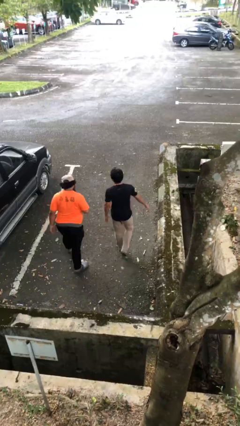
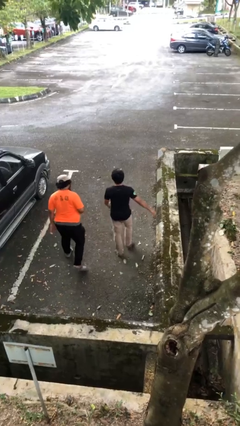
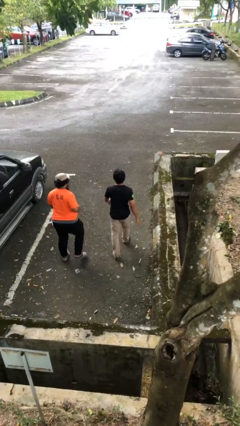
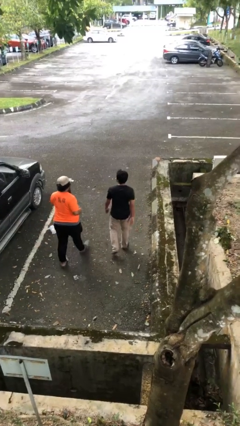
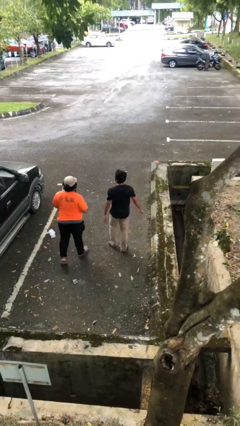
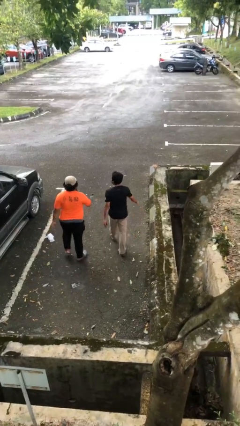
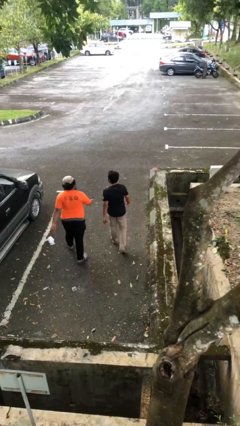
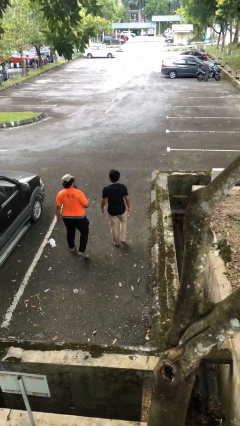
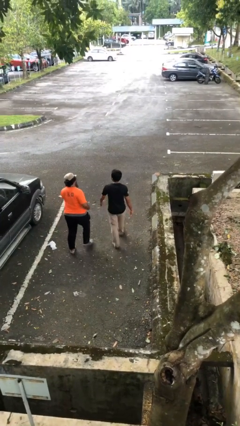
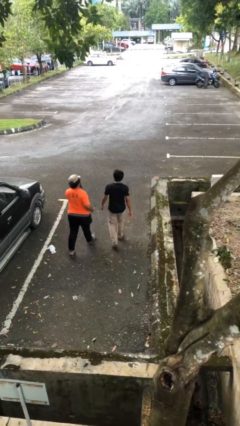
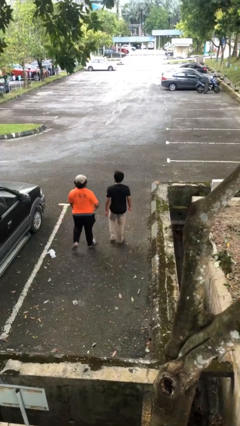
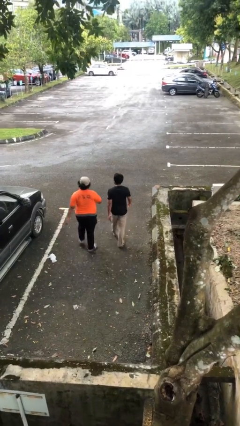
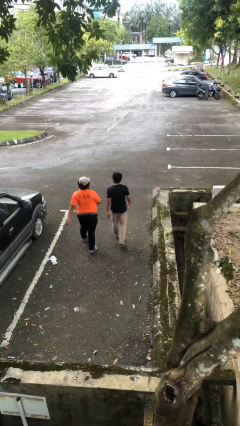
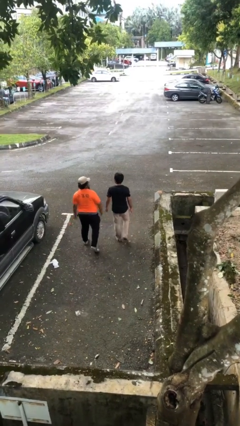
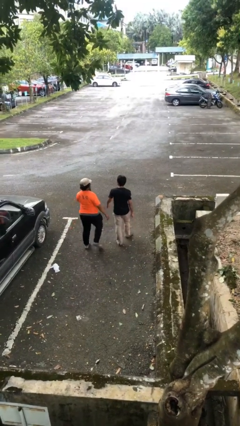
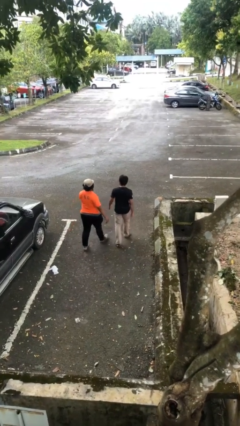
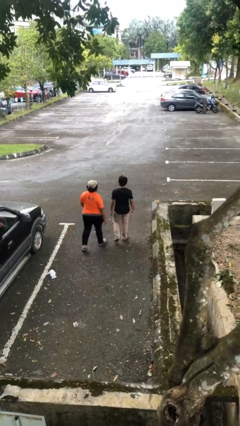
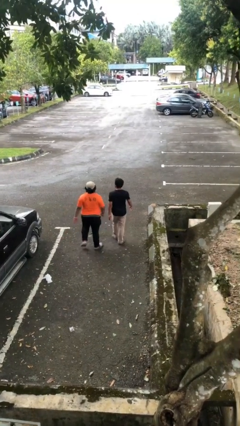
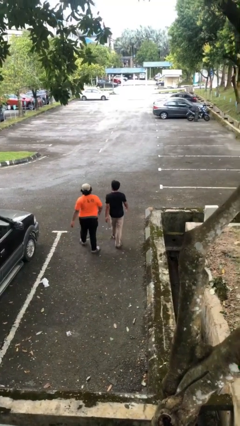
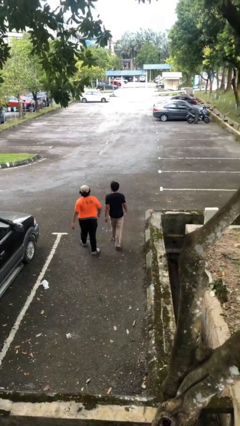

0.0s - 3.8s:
person talks to person

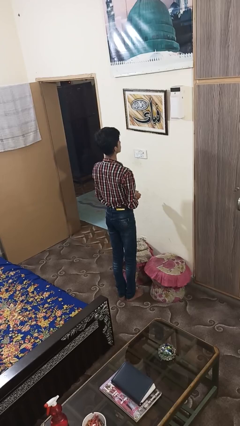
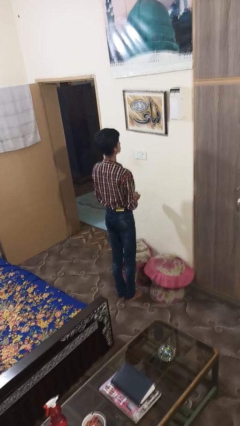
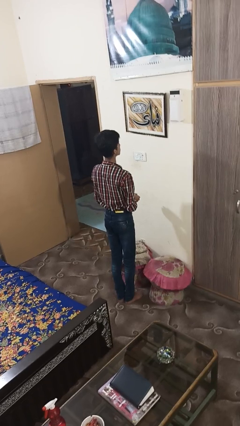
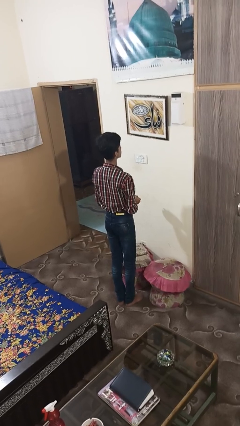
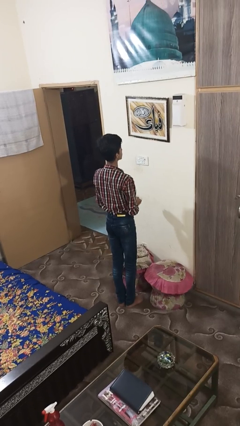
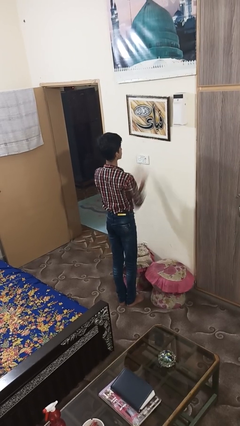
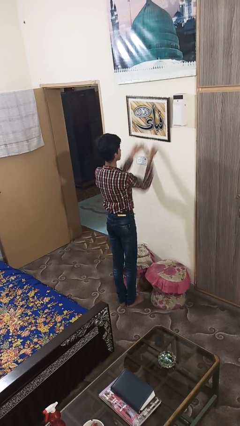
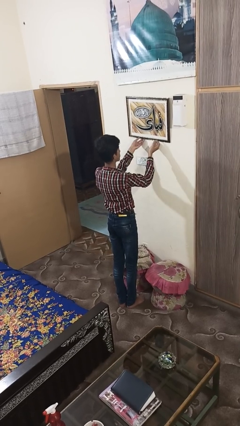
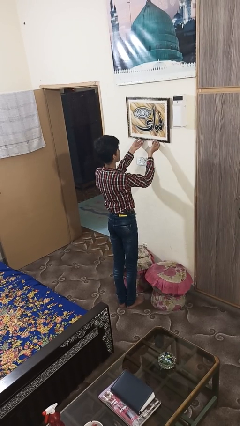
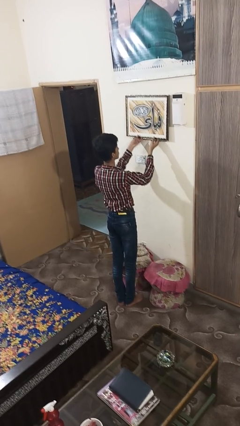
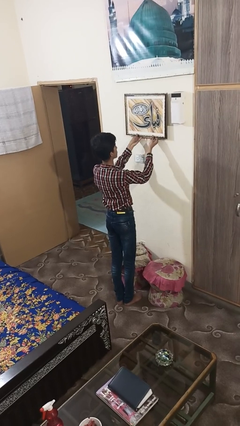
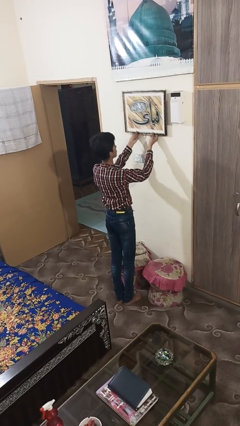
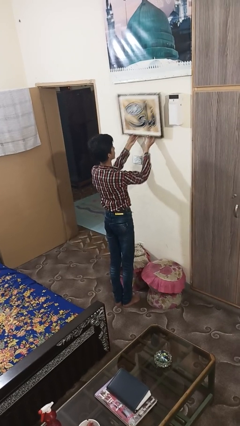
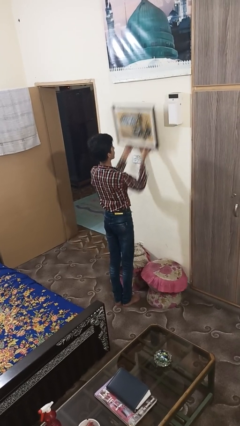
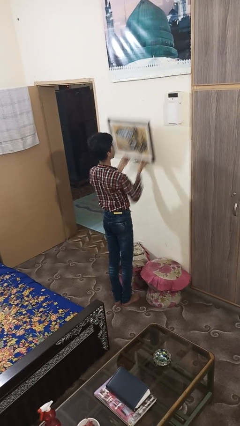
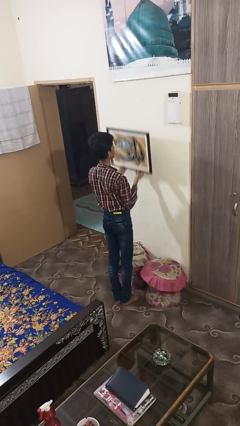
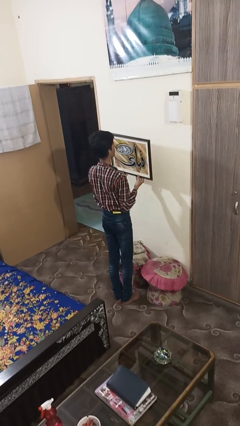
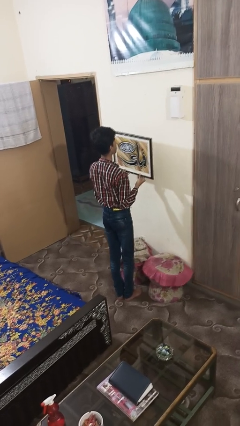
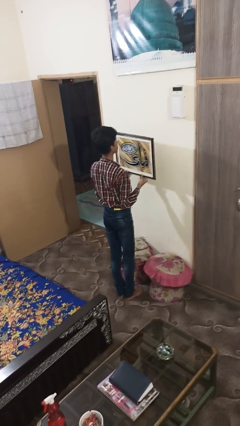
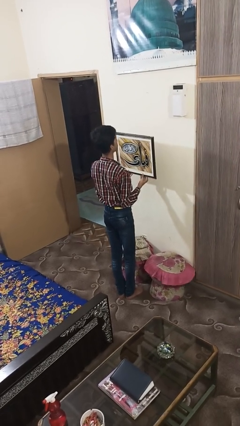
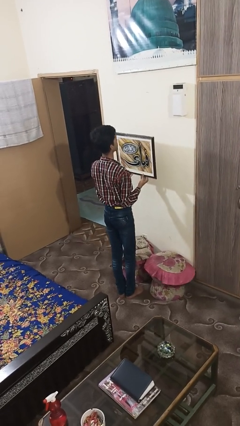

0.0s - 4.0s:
person takes down picture frame

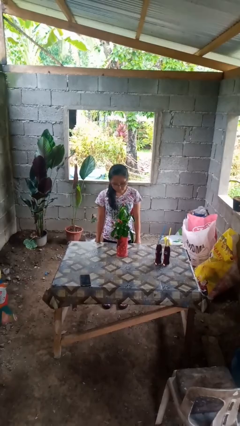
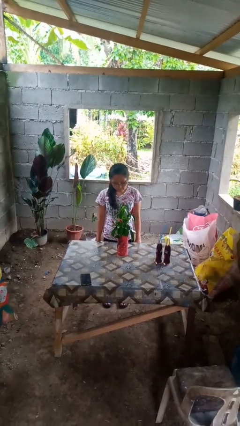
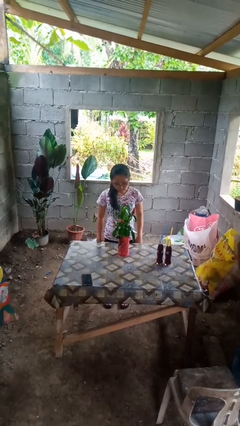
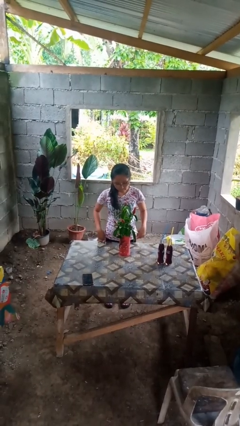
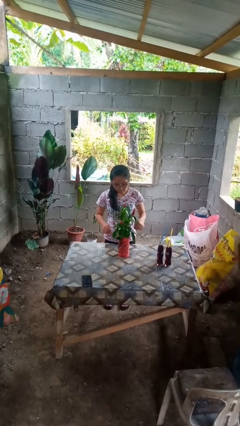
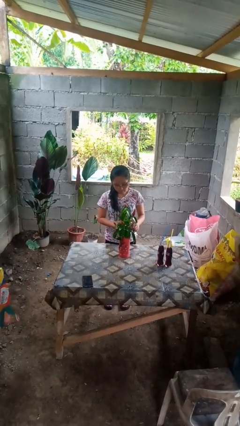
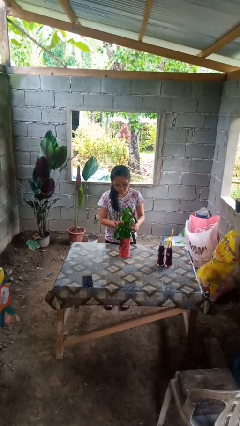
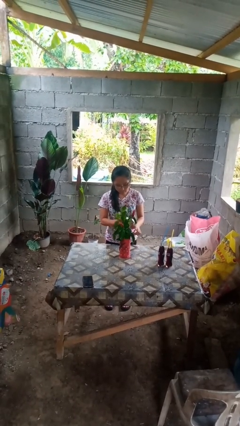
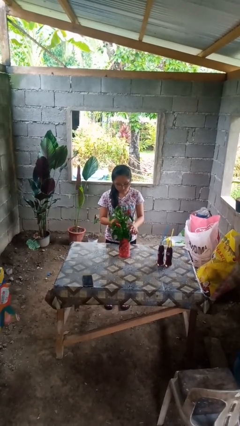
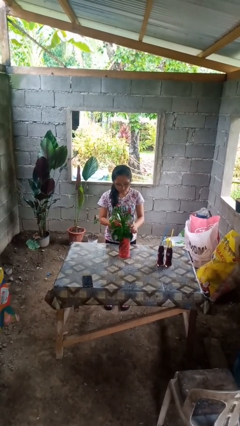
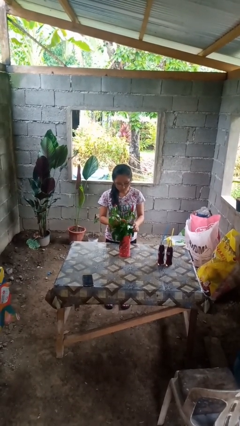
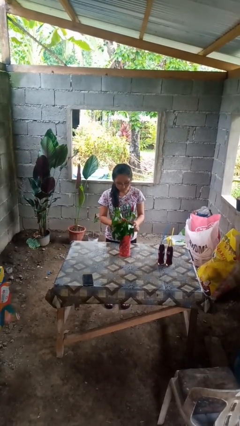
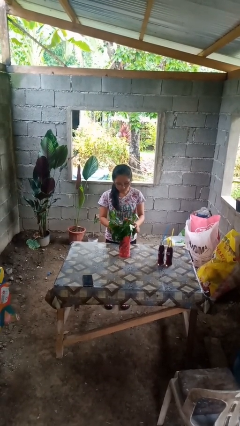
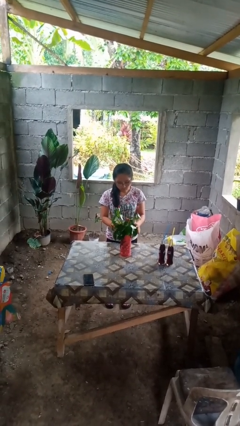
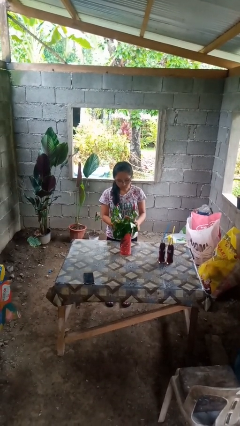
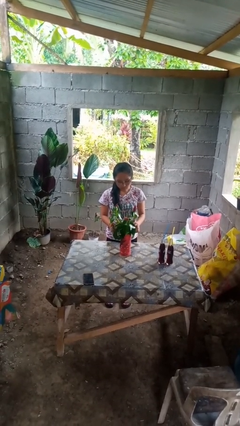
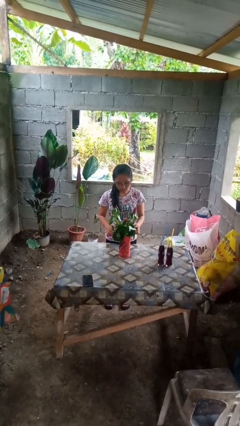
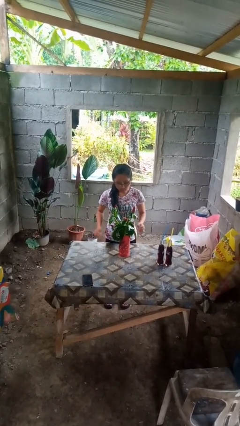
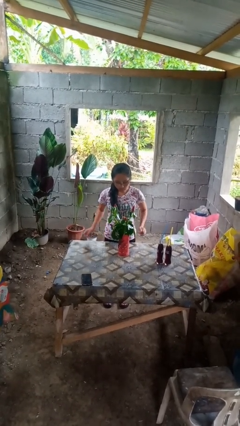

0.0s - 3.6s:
person arranges flowers in vase

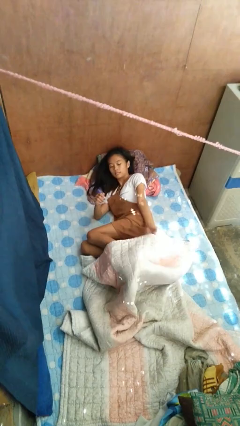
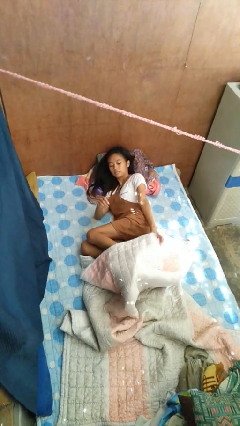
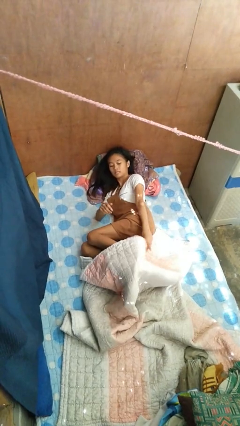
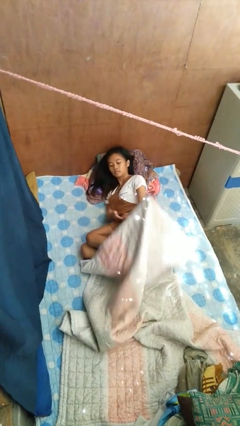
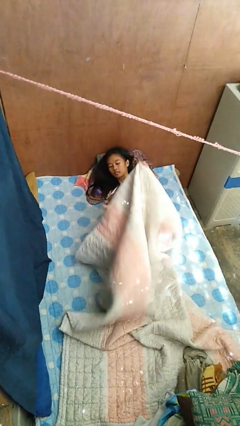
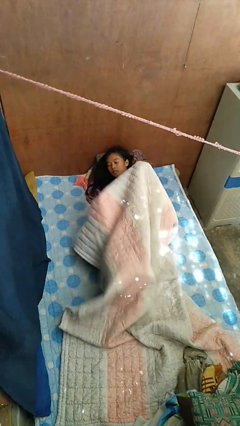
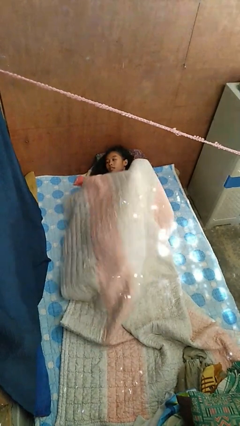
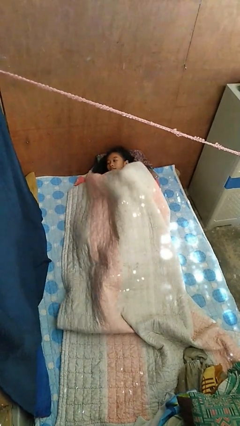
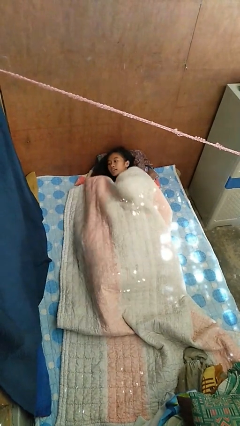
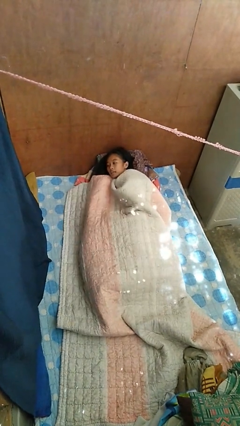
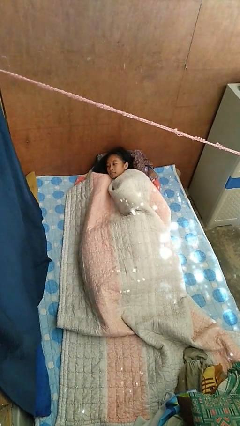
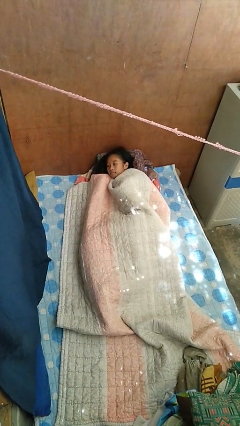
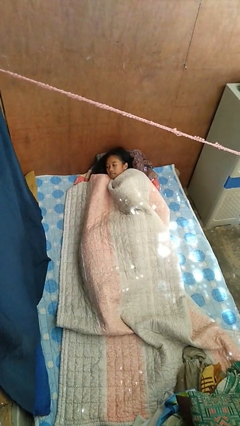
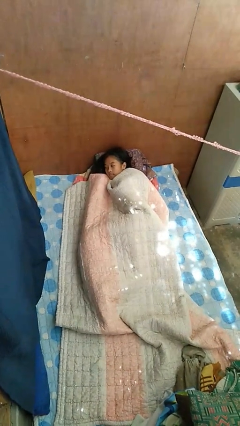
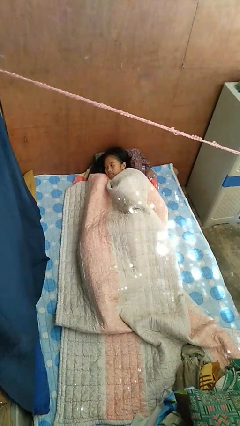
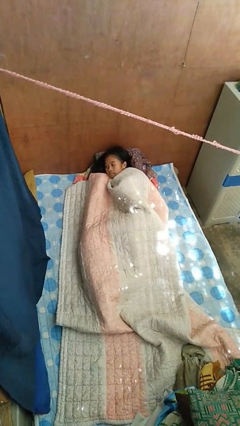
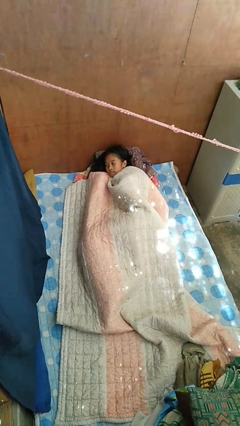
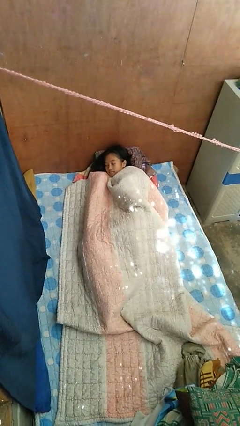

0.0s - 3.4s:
person covers with bedsheets

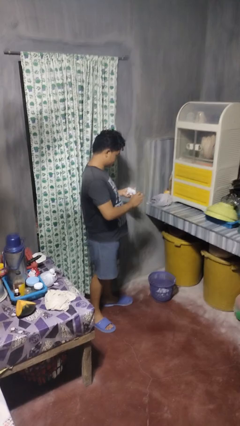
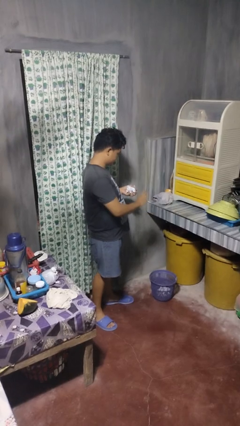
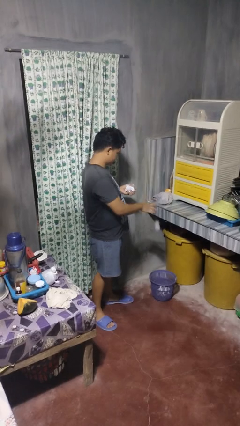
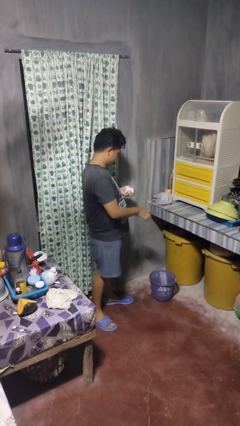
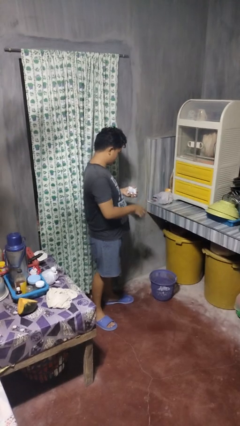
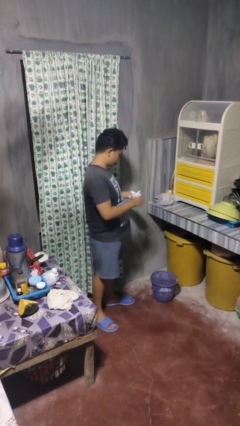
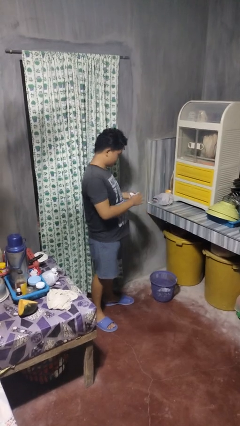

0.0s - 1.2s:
person discards trash

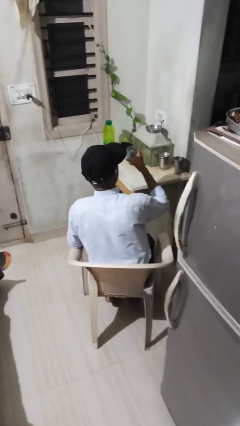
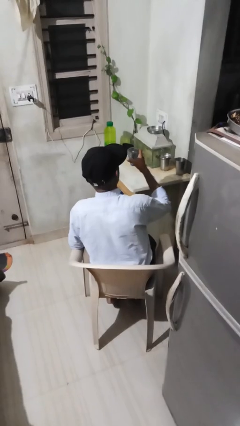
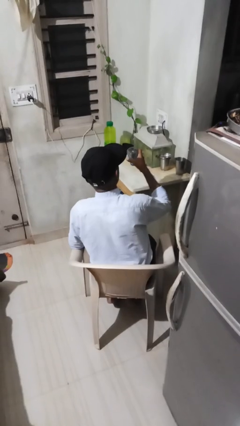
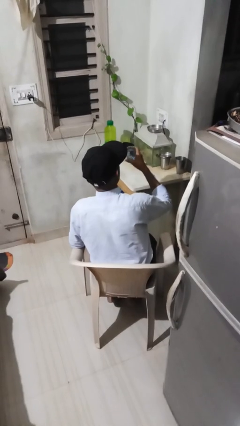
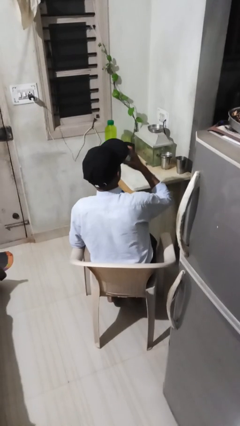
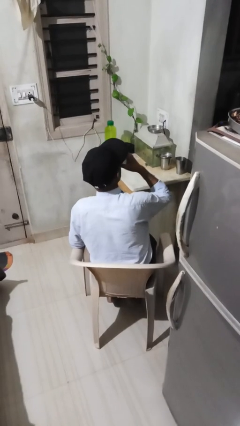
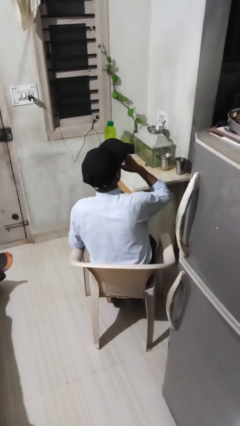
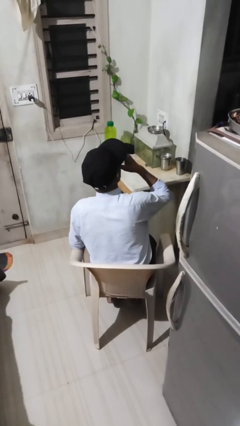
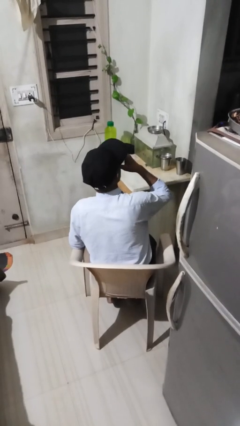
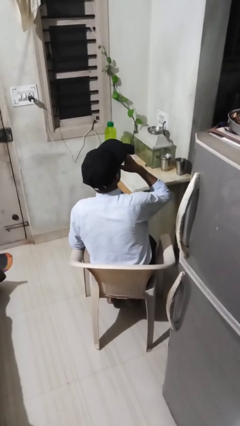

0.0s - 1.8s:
person drinks from shotglass
